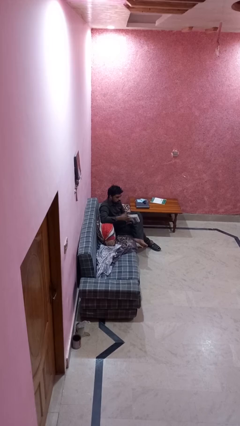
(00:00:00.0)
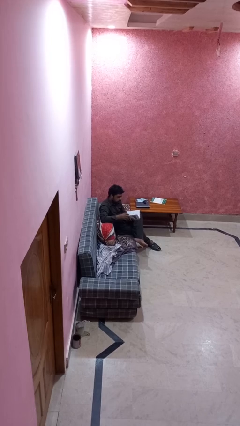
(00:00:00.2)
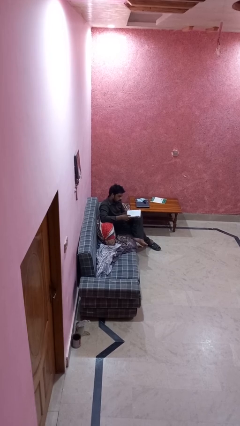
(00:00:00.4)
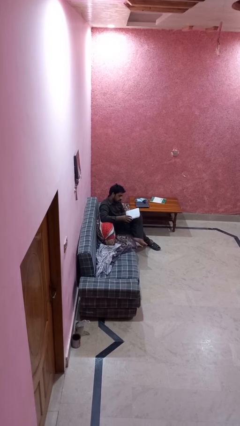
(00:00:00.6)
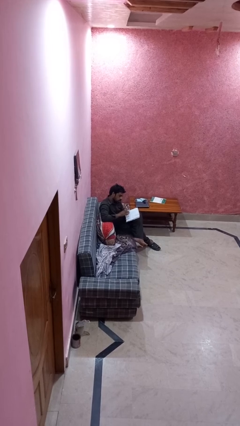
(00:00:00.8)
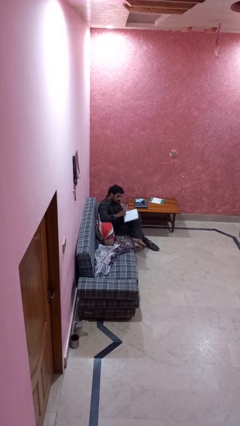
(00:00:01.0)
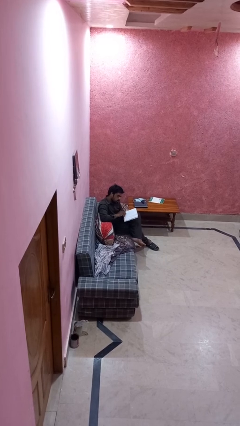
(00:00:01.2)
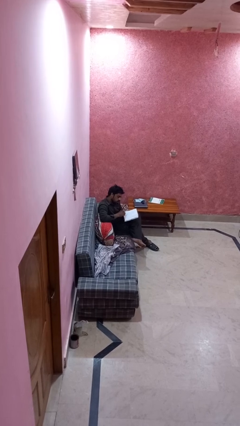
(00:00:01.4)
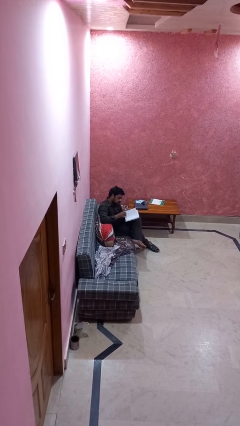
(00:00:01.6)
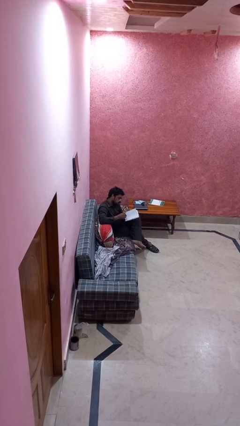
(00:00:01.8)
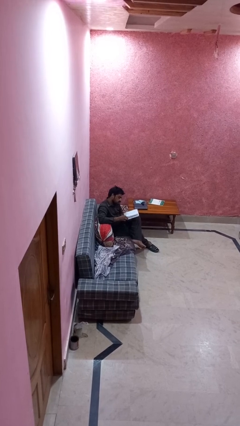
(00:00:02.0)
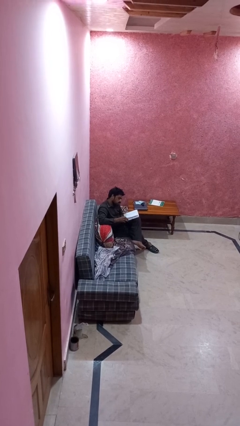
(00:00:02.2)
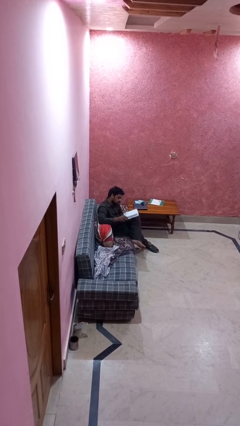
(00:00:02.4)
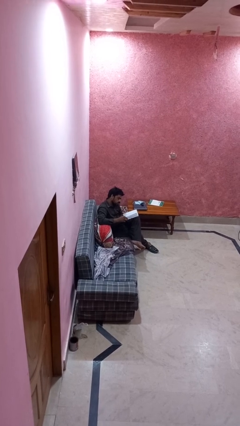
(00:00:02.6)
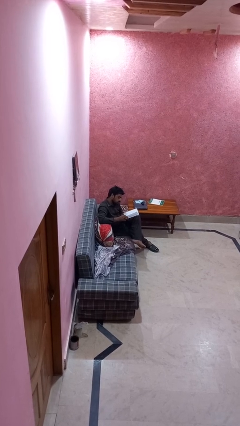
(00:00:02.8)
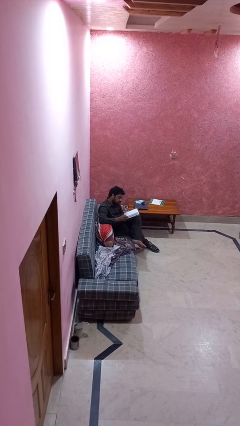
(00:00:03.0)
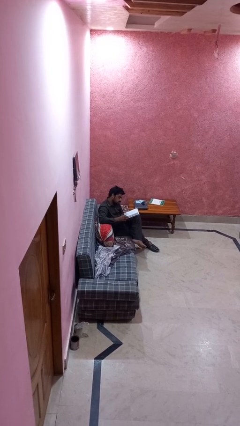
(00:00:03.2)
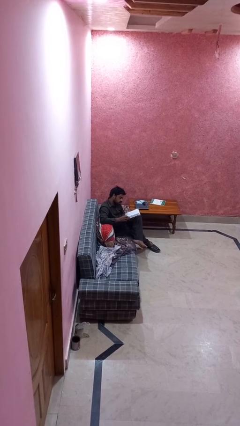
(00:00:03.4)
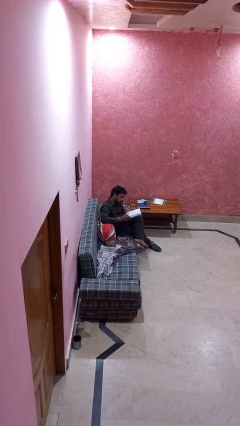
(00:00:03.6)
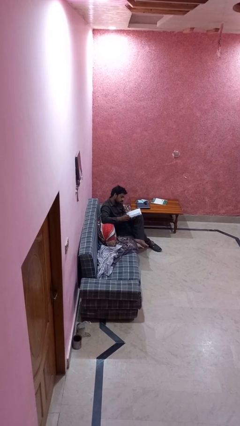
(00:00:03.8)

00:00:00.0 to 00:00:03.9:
person reads book

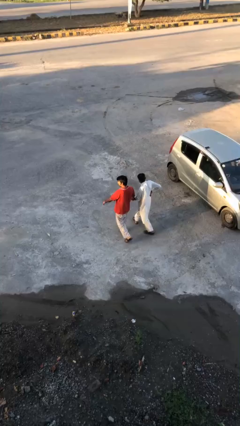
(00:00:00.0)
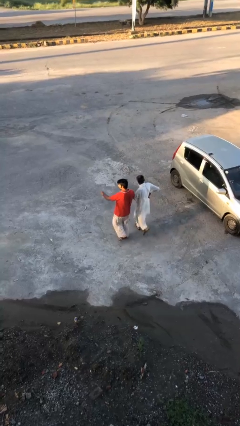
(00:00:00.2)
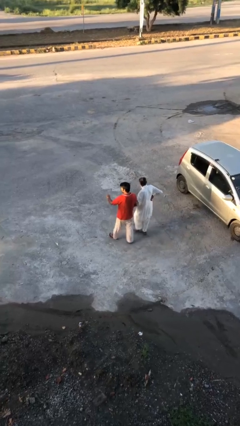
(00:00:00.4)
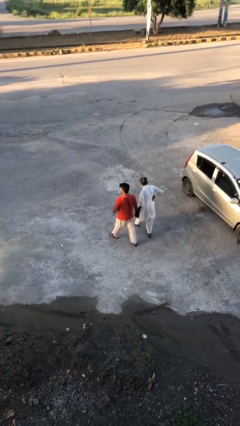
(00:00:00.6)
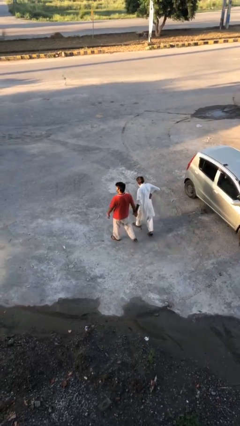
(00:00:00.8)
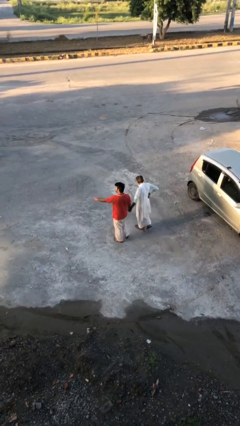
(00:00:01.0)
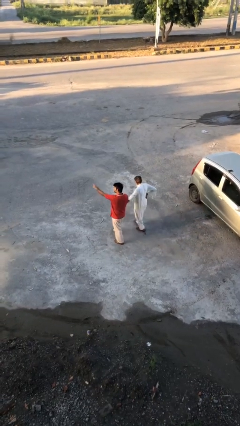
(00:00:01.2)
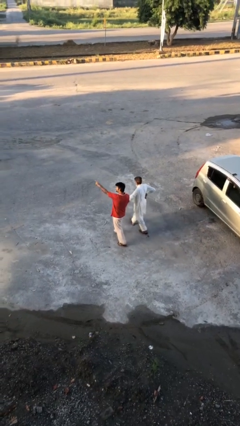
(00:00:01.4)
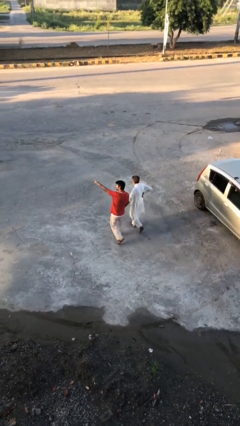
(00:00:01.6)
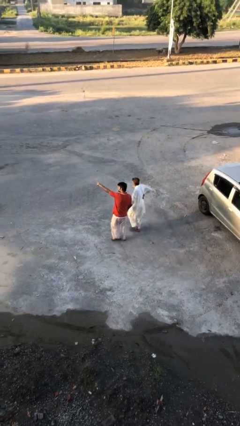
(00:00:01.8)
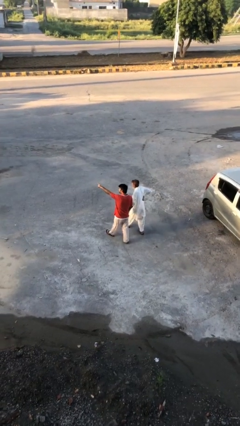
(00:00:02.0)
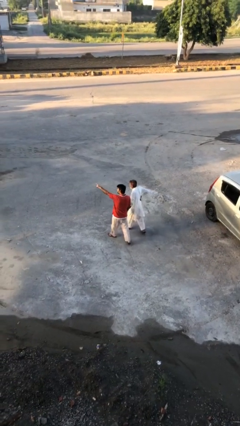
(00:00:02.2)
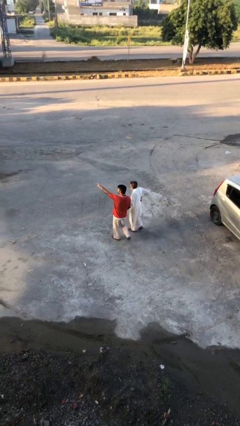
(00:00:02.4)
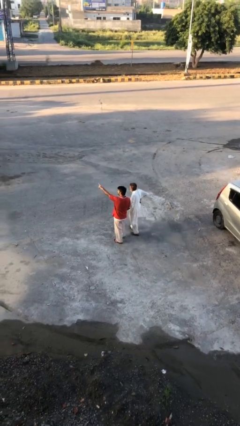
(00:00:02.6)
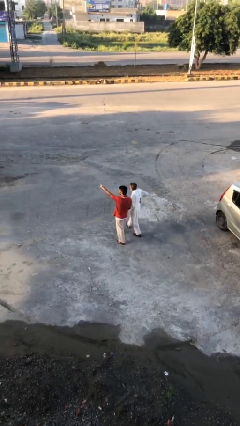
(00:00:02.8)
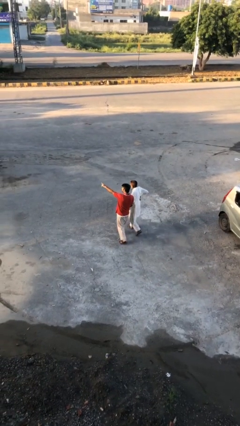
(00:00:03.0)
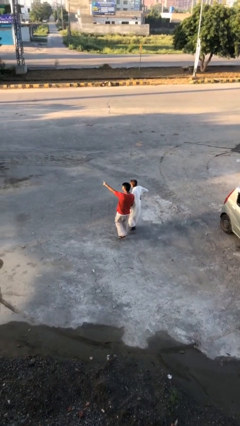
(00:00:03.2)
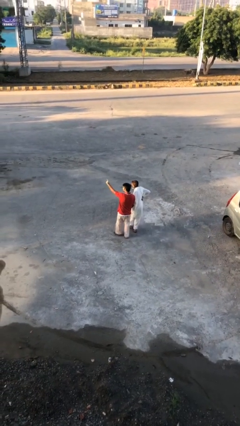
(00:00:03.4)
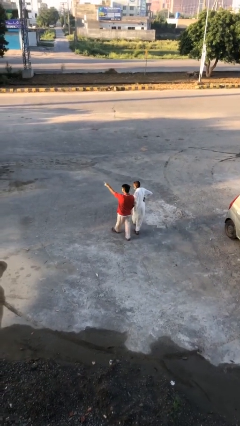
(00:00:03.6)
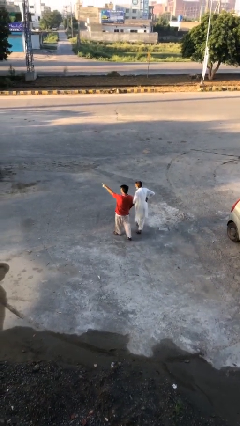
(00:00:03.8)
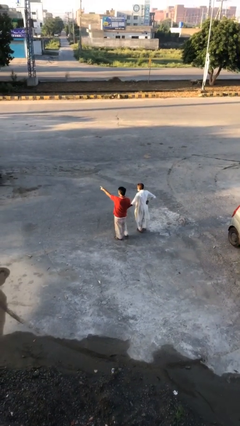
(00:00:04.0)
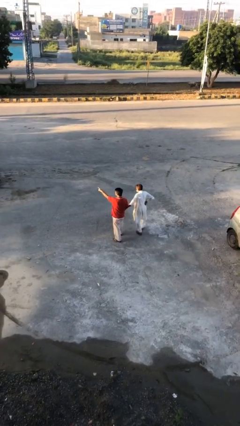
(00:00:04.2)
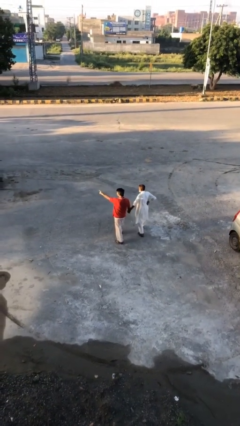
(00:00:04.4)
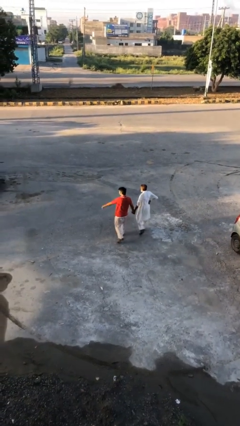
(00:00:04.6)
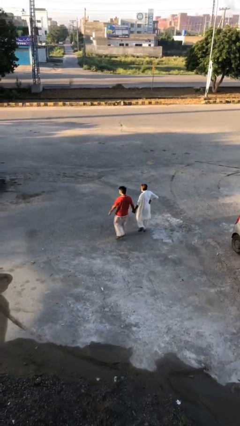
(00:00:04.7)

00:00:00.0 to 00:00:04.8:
person holds hand

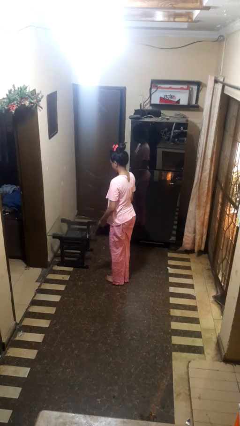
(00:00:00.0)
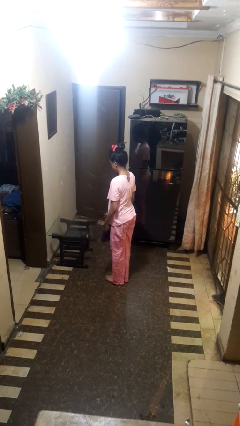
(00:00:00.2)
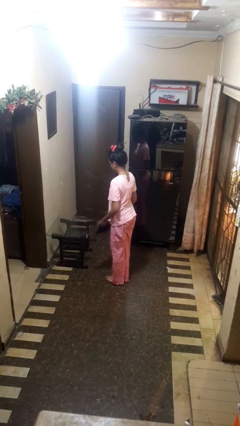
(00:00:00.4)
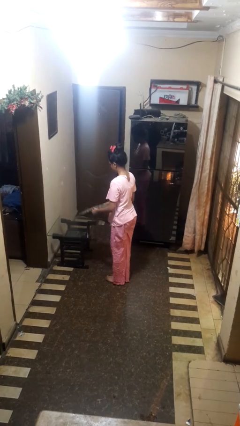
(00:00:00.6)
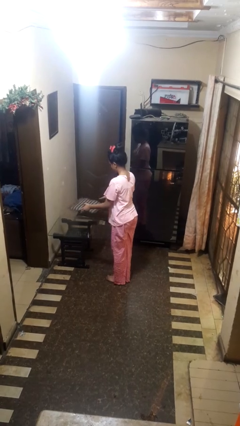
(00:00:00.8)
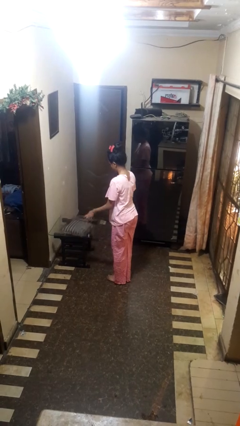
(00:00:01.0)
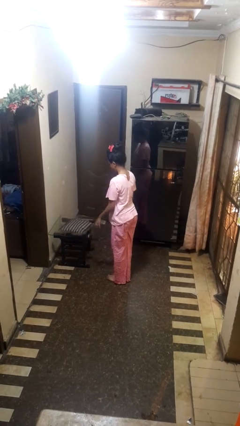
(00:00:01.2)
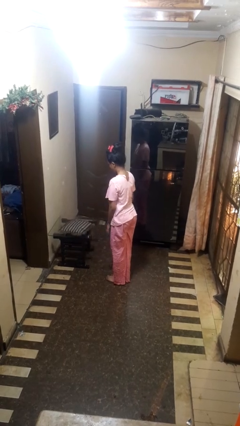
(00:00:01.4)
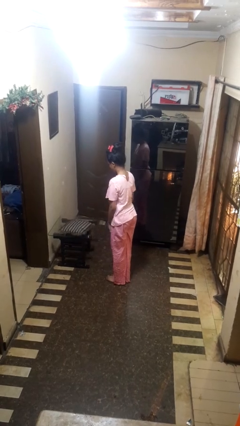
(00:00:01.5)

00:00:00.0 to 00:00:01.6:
person throws object on table

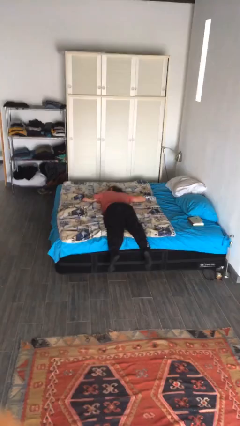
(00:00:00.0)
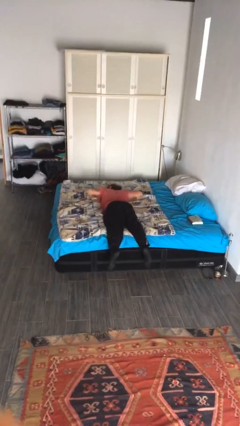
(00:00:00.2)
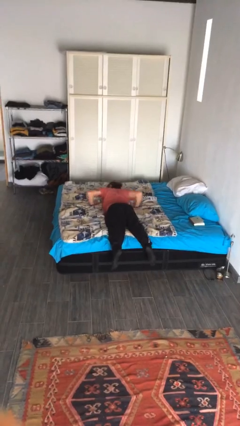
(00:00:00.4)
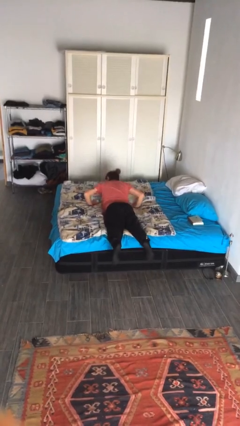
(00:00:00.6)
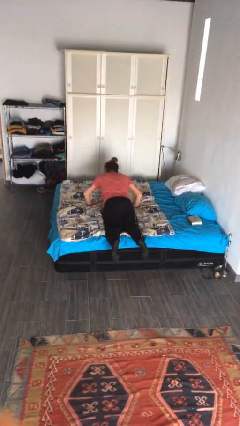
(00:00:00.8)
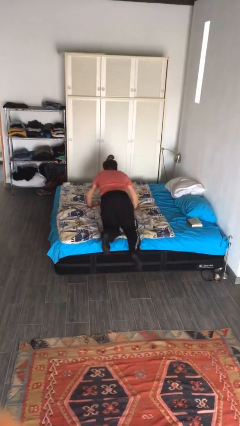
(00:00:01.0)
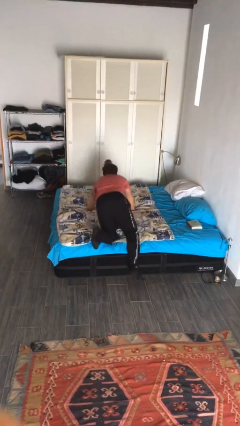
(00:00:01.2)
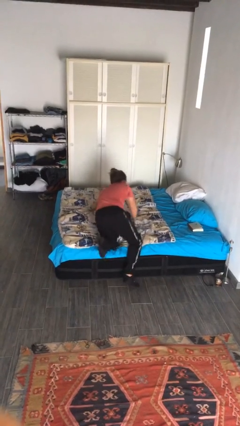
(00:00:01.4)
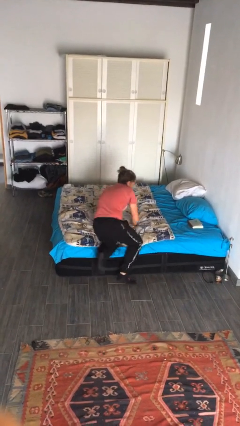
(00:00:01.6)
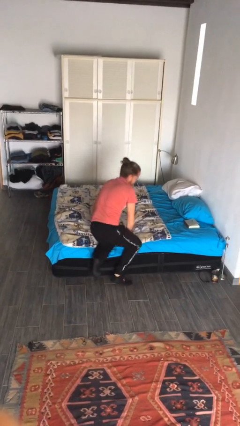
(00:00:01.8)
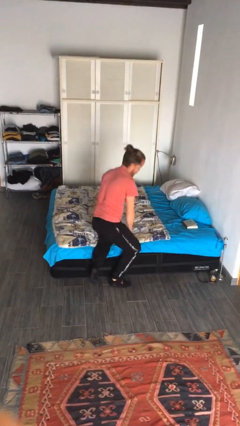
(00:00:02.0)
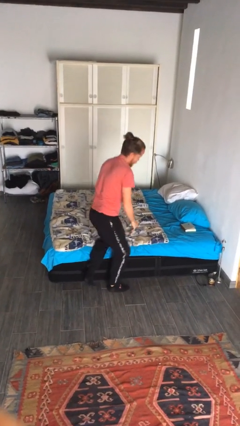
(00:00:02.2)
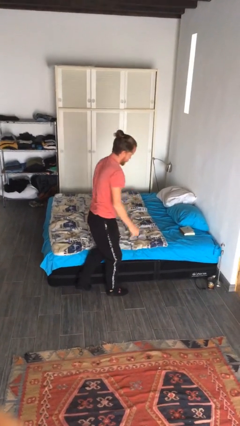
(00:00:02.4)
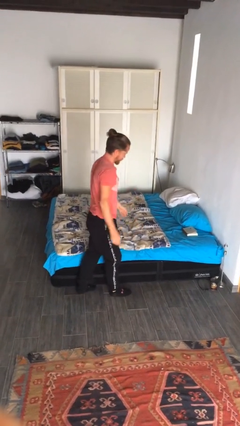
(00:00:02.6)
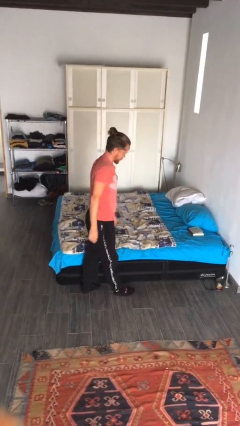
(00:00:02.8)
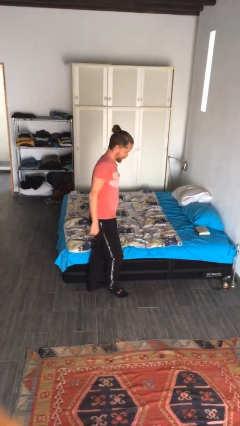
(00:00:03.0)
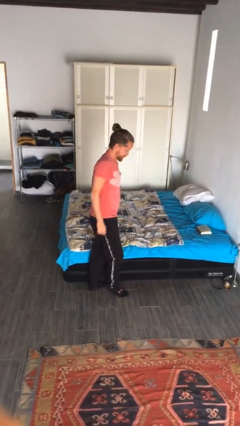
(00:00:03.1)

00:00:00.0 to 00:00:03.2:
person stands up

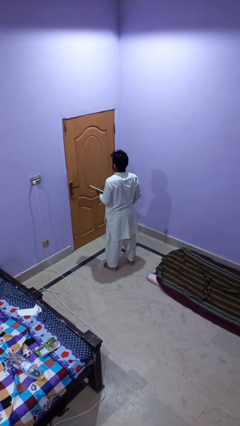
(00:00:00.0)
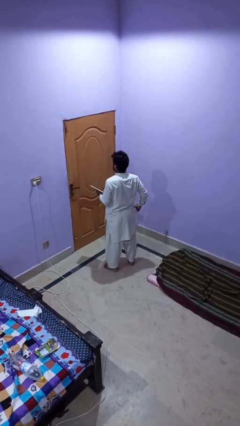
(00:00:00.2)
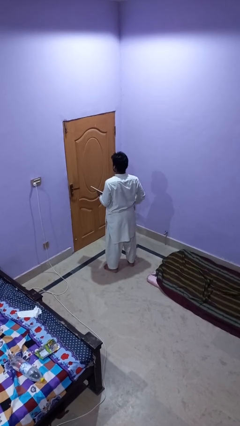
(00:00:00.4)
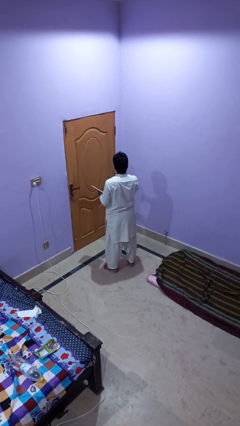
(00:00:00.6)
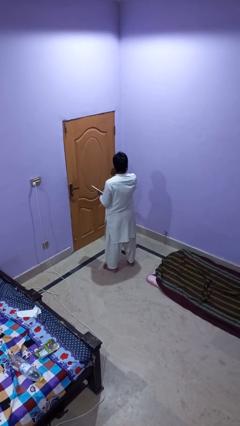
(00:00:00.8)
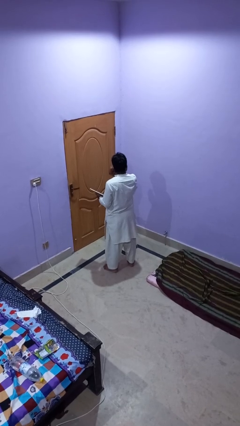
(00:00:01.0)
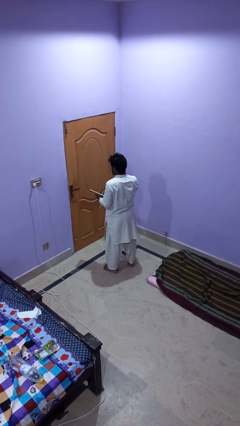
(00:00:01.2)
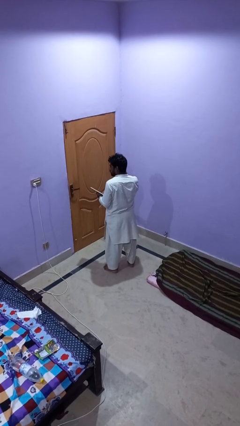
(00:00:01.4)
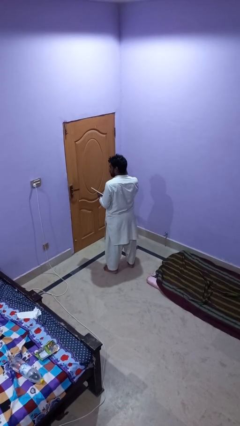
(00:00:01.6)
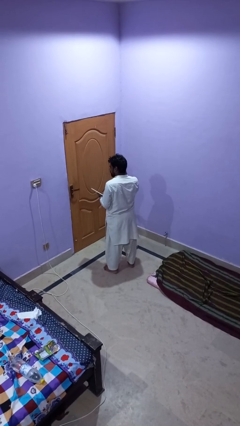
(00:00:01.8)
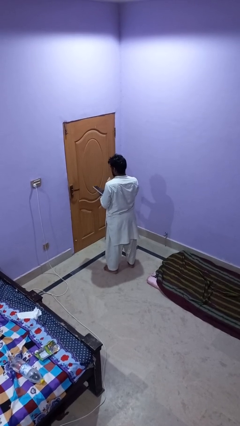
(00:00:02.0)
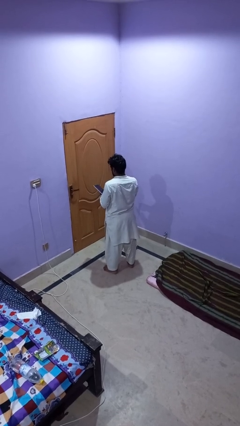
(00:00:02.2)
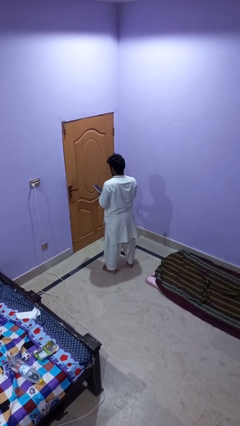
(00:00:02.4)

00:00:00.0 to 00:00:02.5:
person takes off headphones

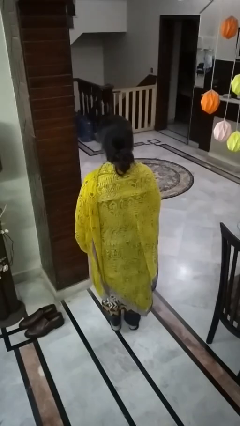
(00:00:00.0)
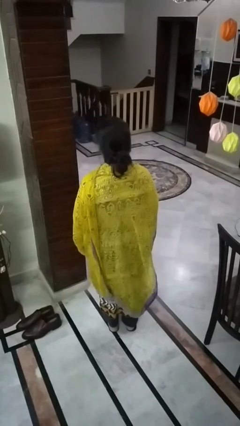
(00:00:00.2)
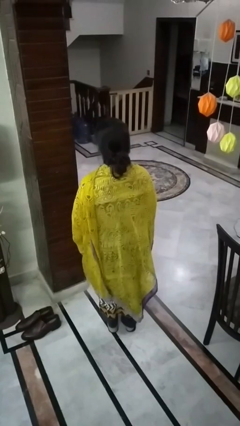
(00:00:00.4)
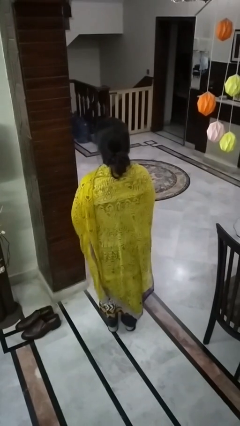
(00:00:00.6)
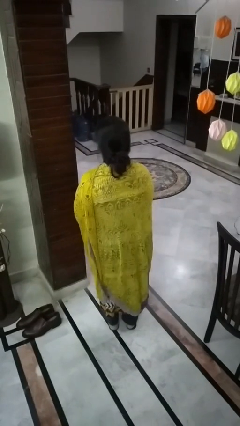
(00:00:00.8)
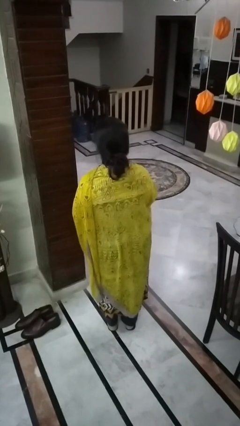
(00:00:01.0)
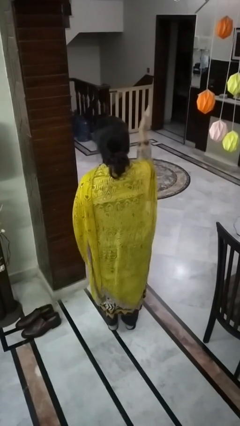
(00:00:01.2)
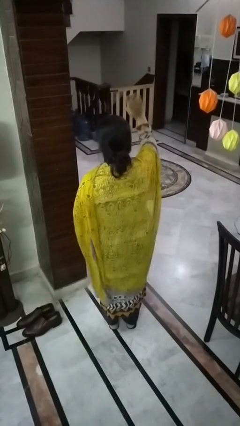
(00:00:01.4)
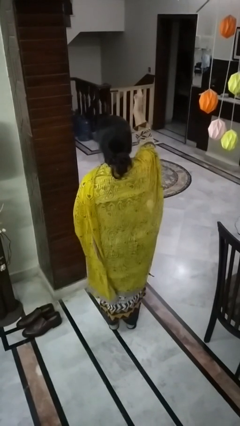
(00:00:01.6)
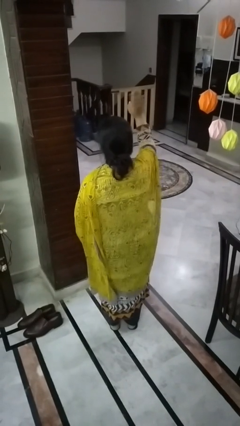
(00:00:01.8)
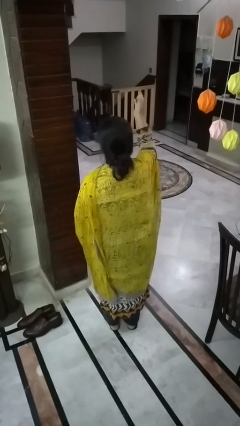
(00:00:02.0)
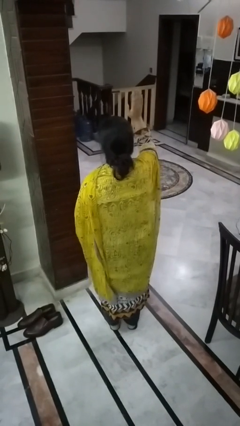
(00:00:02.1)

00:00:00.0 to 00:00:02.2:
person waves at person
